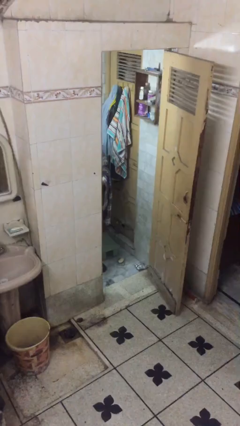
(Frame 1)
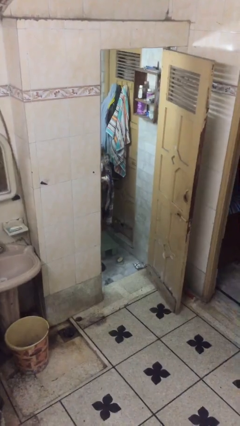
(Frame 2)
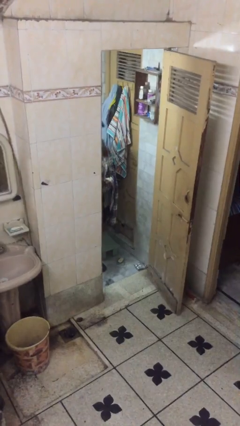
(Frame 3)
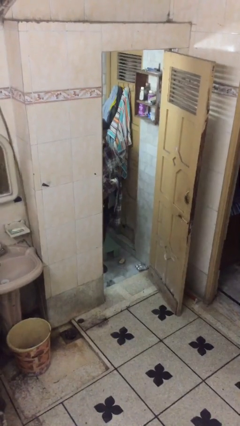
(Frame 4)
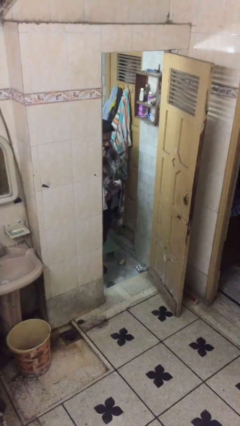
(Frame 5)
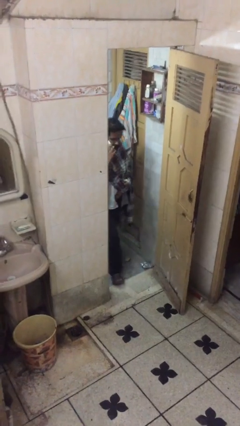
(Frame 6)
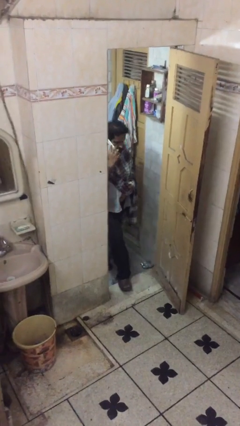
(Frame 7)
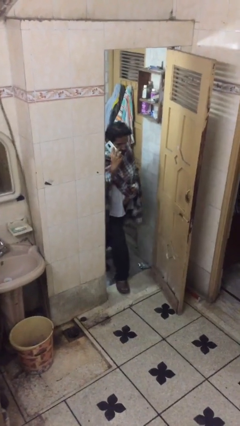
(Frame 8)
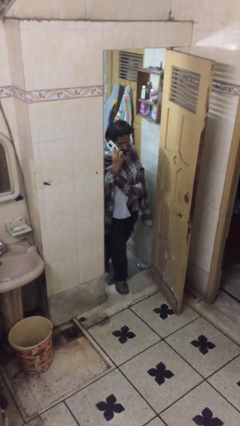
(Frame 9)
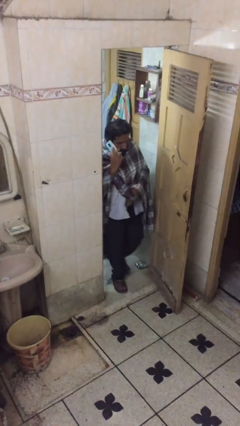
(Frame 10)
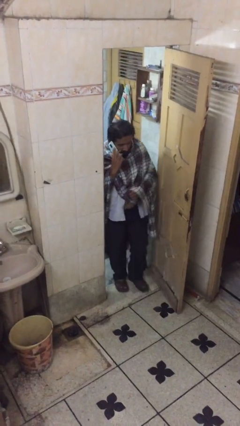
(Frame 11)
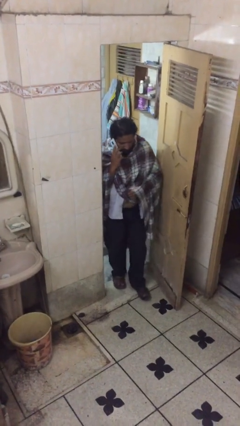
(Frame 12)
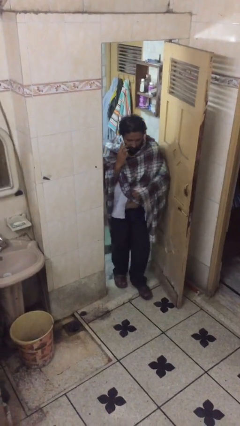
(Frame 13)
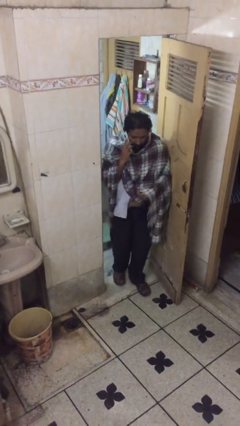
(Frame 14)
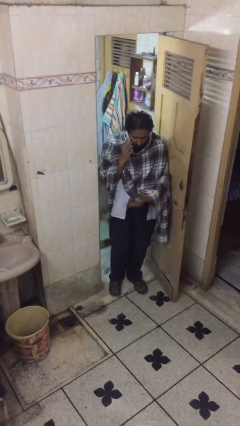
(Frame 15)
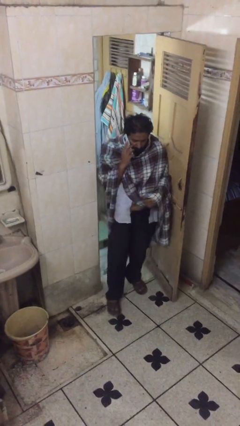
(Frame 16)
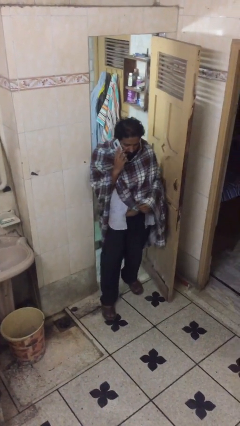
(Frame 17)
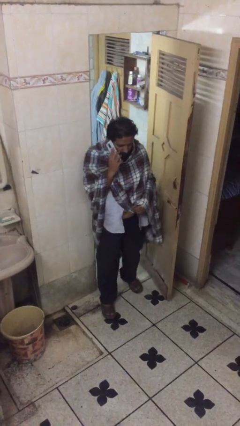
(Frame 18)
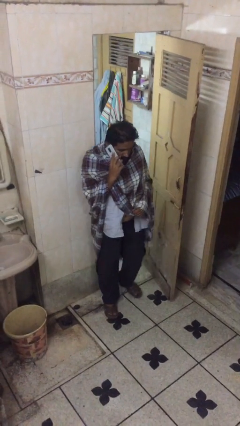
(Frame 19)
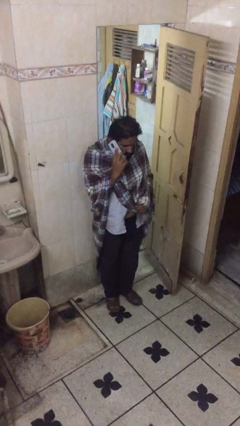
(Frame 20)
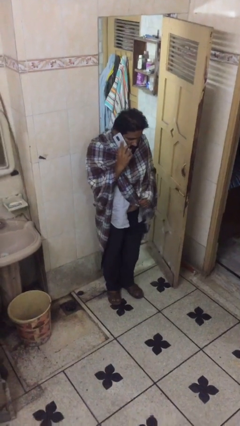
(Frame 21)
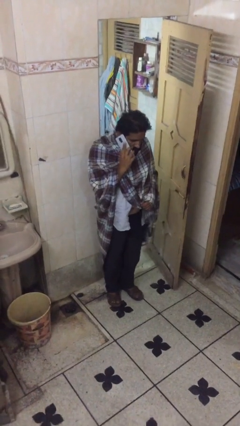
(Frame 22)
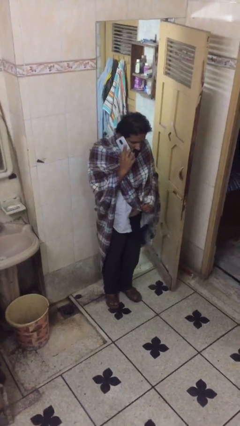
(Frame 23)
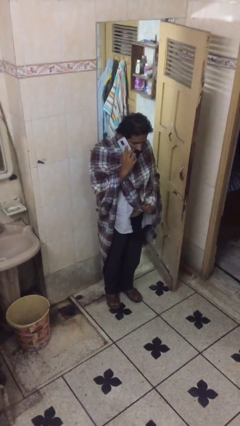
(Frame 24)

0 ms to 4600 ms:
person enters scene through structure

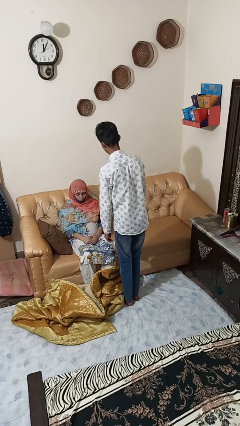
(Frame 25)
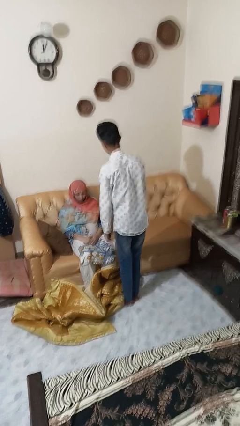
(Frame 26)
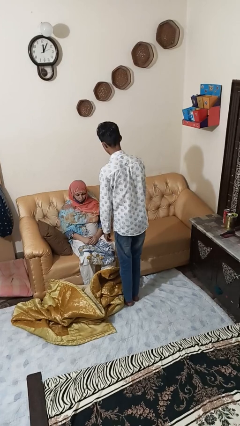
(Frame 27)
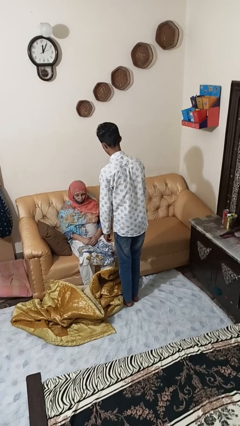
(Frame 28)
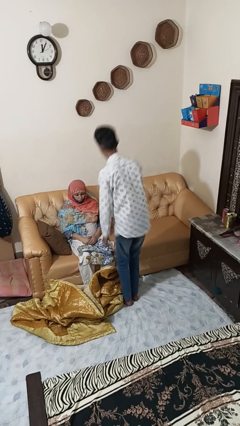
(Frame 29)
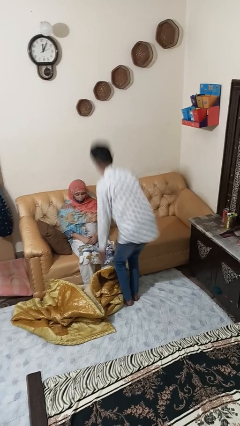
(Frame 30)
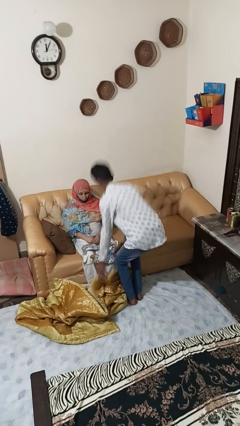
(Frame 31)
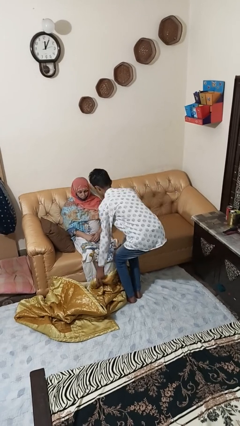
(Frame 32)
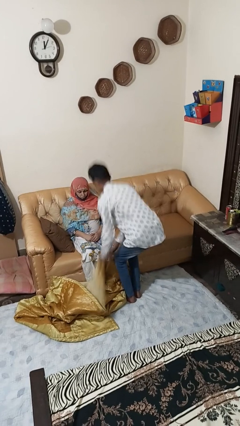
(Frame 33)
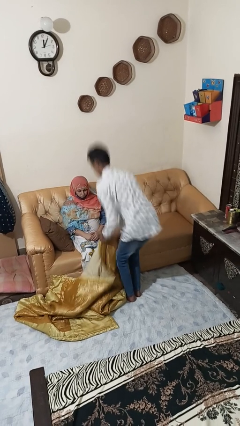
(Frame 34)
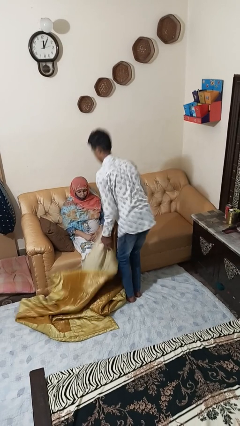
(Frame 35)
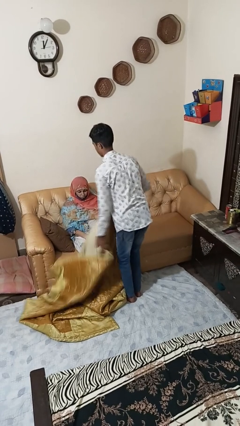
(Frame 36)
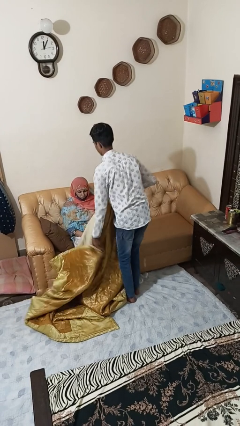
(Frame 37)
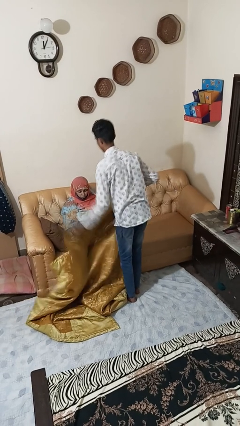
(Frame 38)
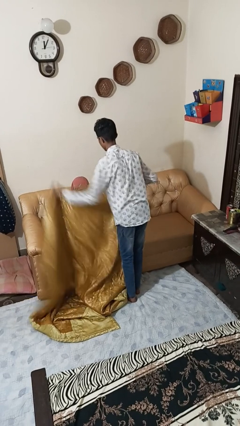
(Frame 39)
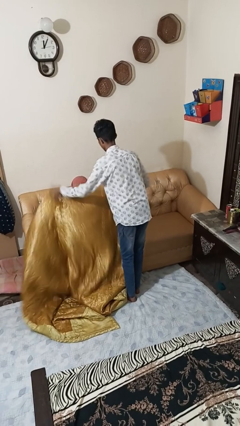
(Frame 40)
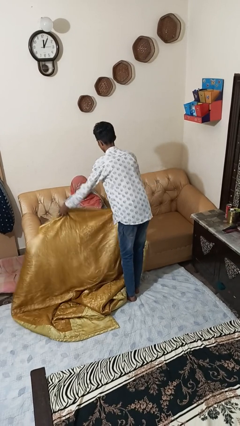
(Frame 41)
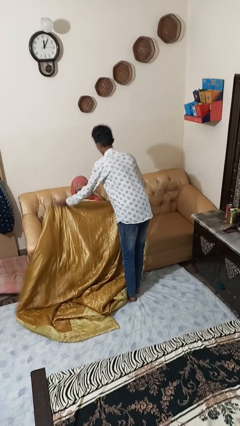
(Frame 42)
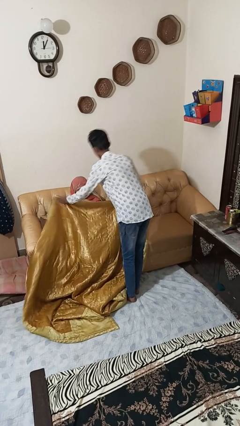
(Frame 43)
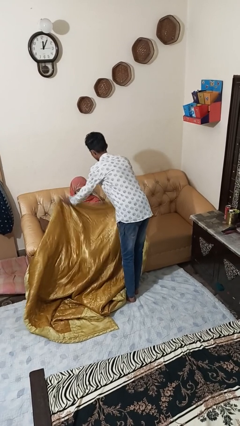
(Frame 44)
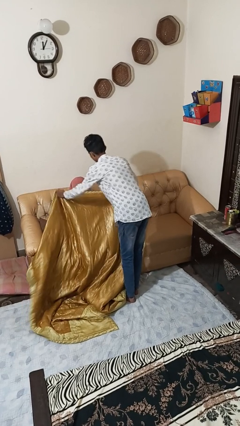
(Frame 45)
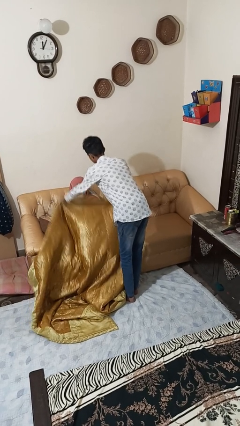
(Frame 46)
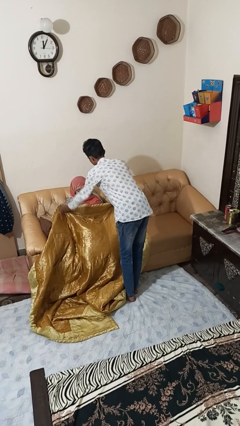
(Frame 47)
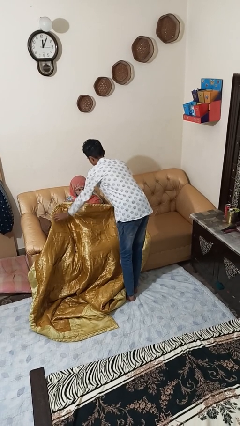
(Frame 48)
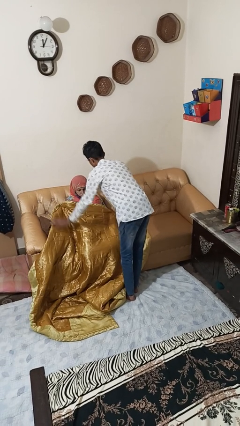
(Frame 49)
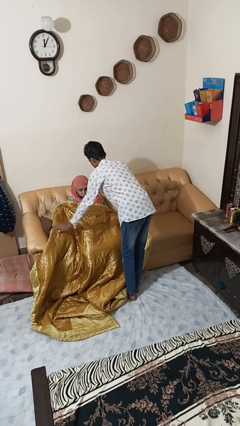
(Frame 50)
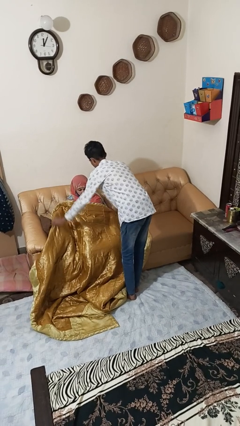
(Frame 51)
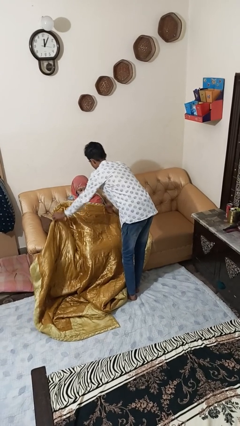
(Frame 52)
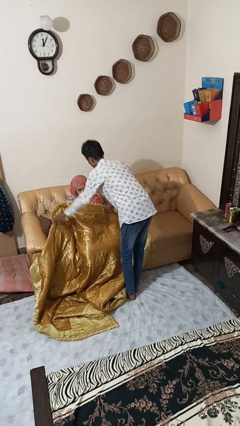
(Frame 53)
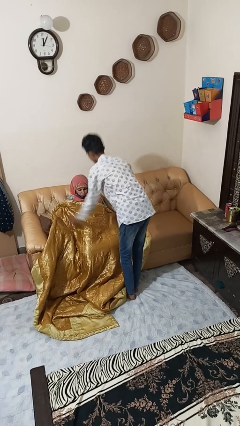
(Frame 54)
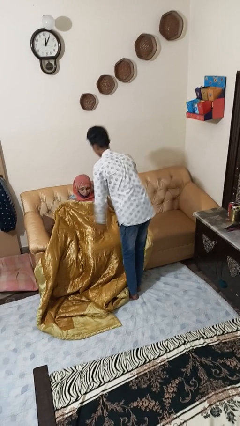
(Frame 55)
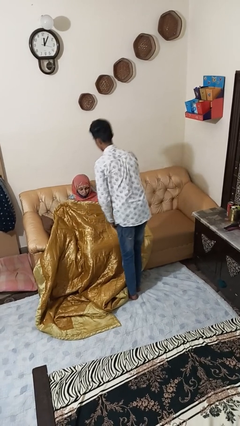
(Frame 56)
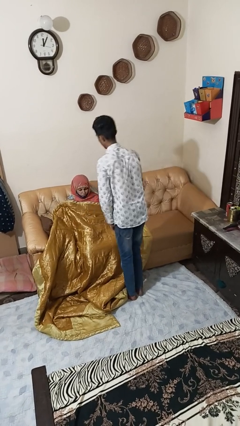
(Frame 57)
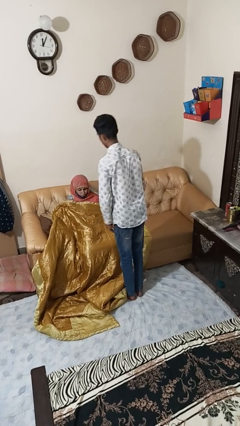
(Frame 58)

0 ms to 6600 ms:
person covers friend with blanket

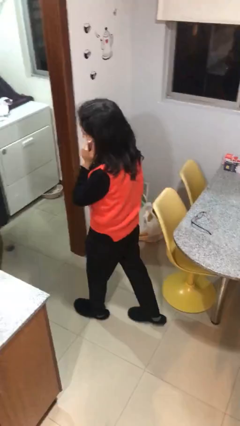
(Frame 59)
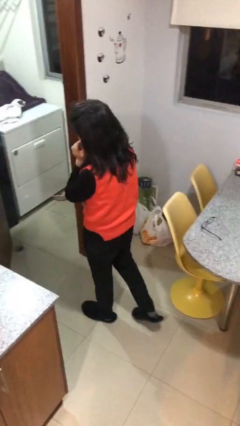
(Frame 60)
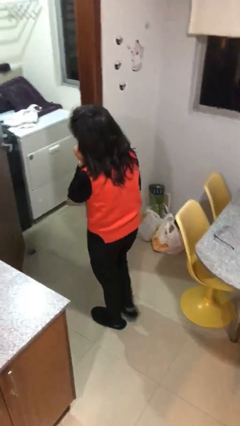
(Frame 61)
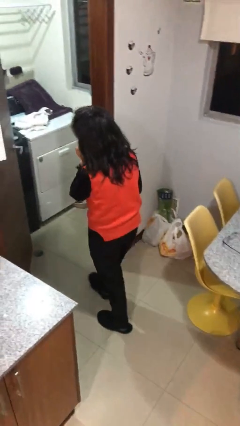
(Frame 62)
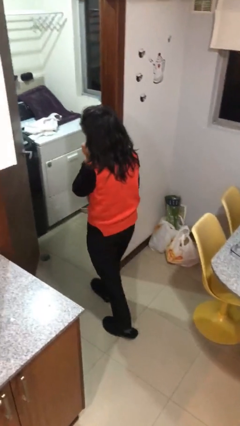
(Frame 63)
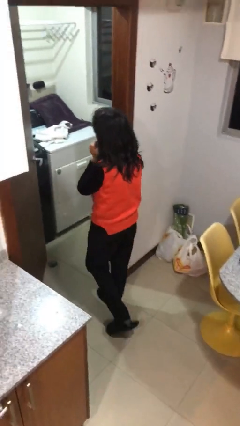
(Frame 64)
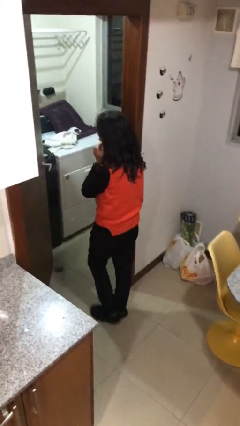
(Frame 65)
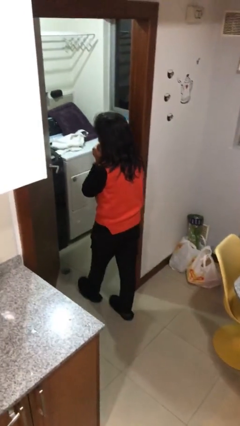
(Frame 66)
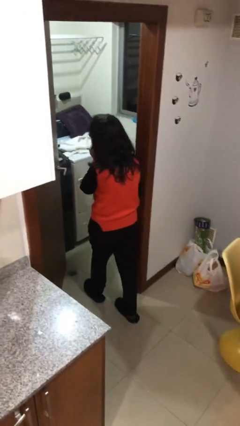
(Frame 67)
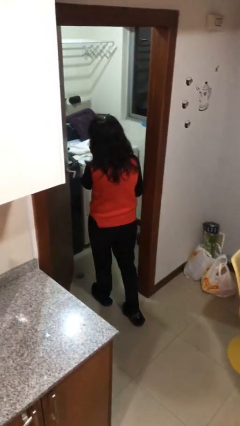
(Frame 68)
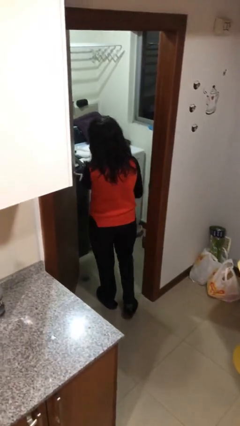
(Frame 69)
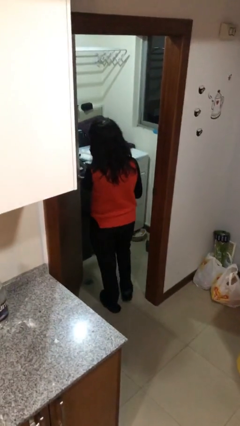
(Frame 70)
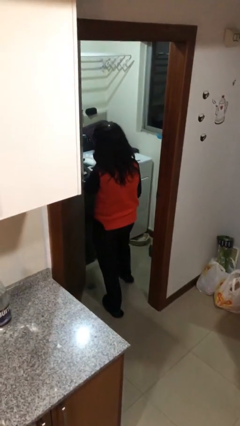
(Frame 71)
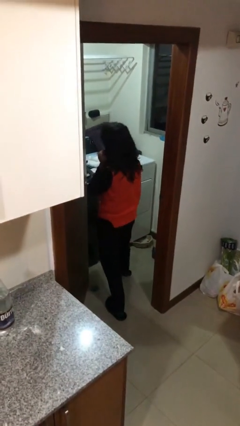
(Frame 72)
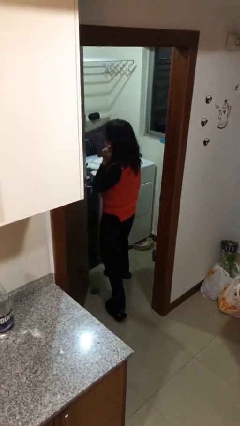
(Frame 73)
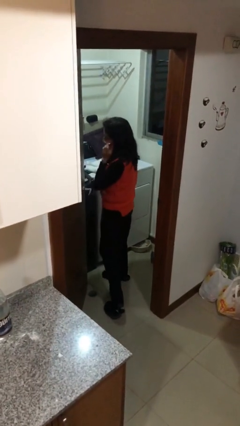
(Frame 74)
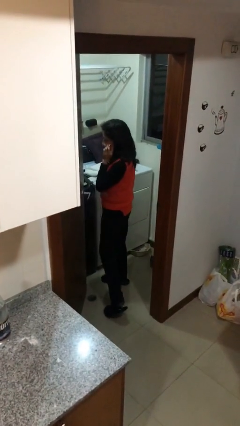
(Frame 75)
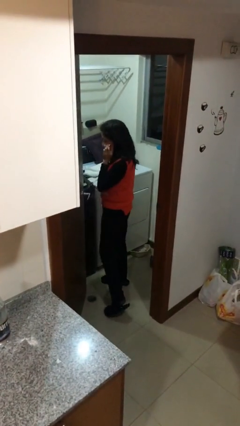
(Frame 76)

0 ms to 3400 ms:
person exits scene through structure

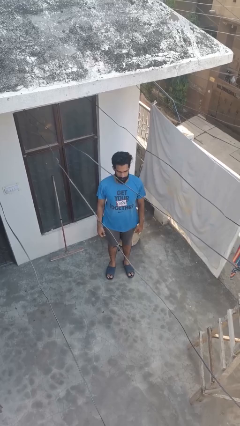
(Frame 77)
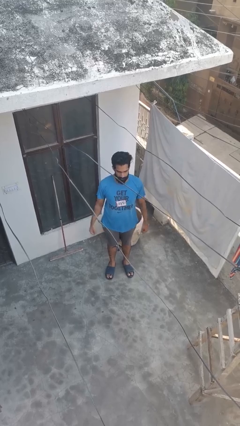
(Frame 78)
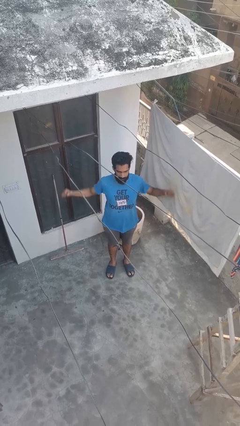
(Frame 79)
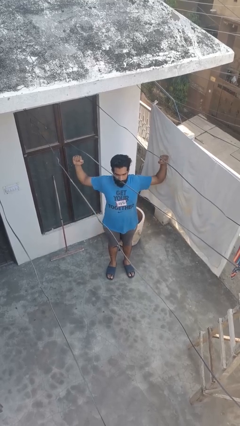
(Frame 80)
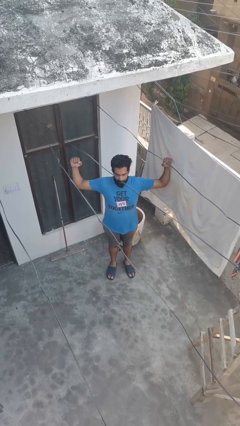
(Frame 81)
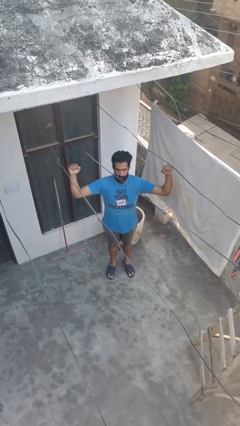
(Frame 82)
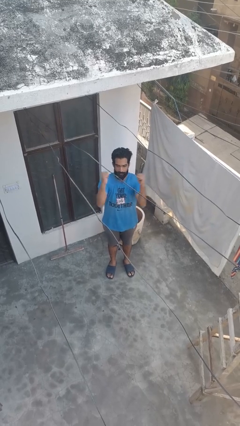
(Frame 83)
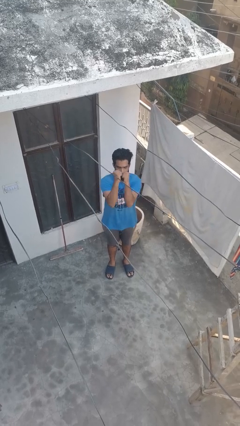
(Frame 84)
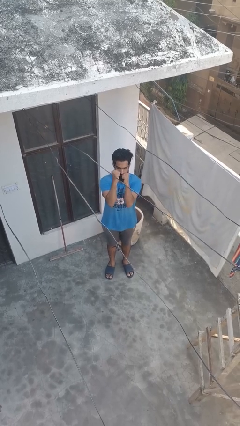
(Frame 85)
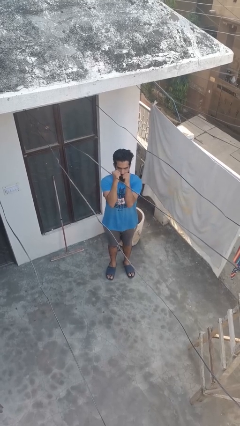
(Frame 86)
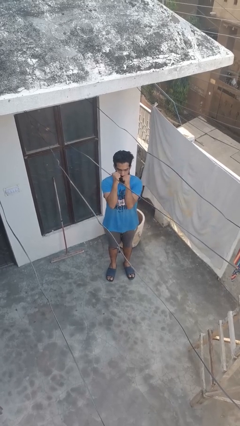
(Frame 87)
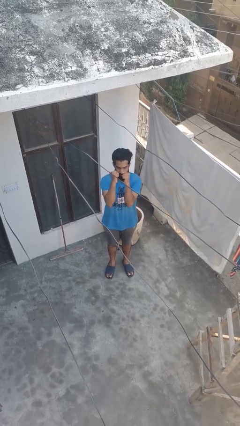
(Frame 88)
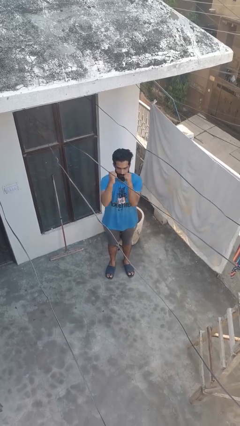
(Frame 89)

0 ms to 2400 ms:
person gestures zoom in

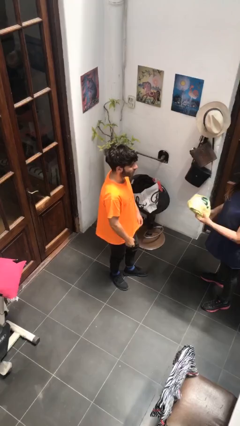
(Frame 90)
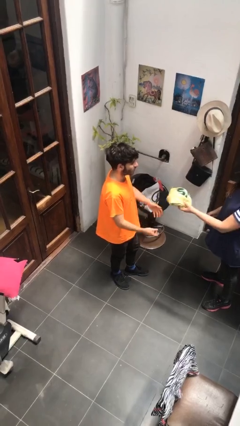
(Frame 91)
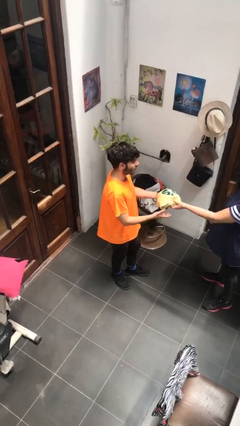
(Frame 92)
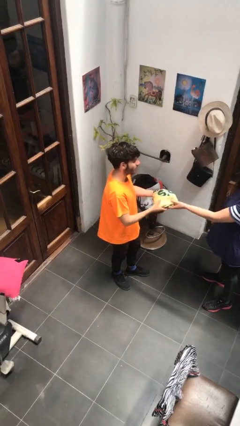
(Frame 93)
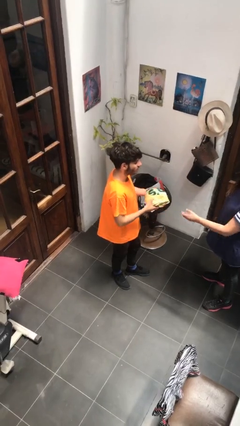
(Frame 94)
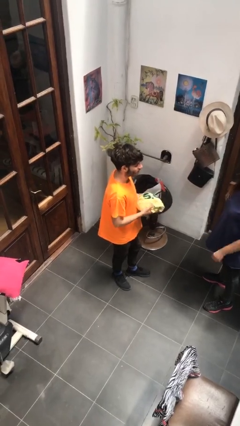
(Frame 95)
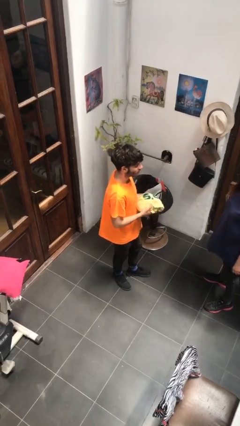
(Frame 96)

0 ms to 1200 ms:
person transfers object to person
